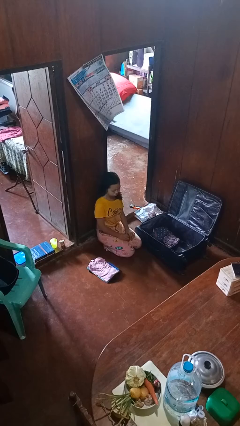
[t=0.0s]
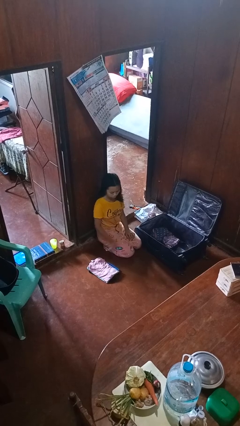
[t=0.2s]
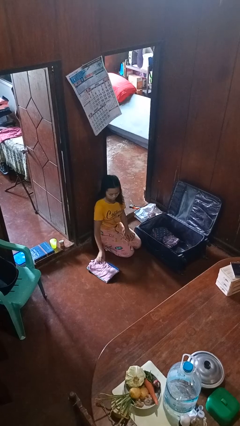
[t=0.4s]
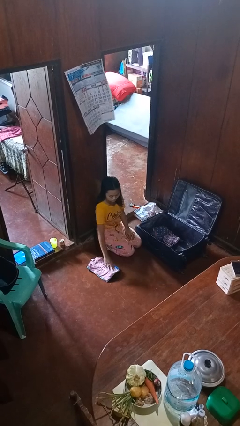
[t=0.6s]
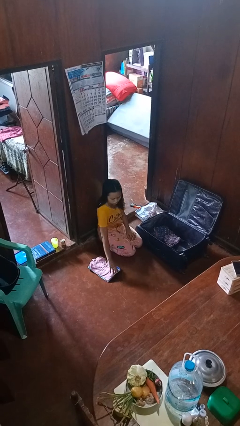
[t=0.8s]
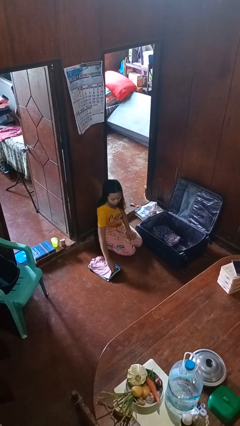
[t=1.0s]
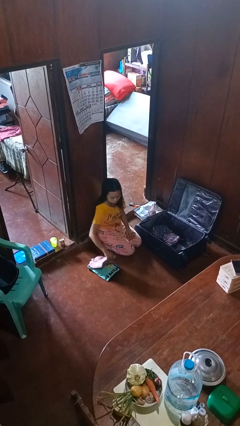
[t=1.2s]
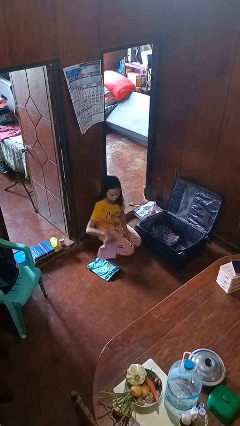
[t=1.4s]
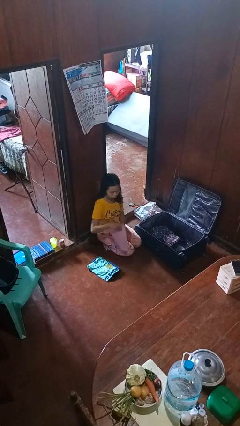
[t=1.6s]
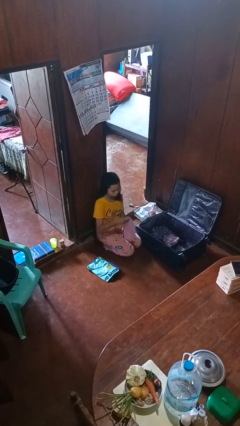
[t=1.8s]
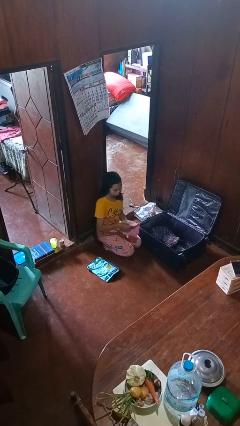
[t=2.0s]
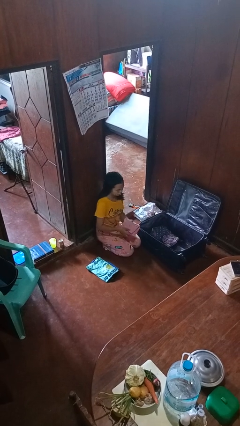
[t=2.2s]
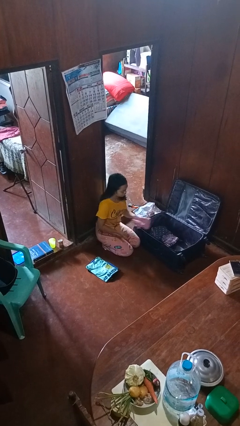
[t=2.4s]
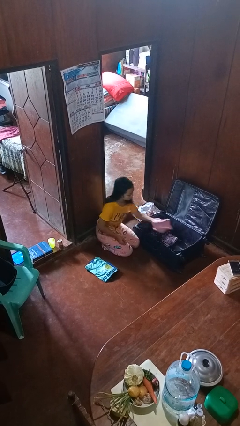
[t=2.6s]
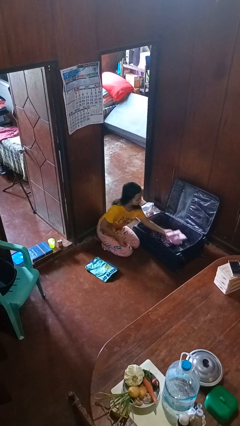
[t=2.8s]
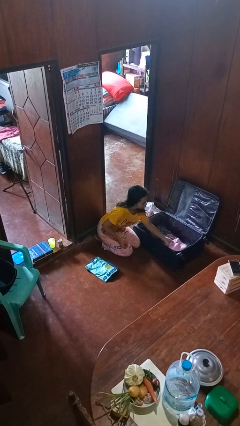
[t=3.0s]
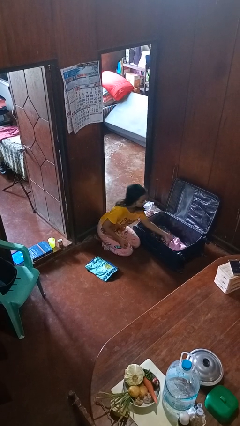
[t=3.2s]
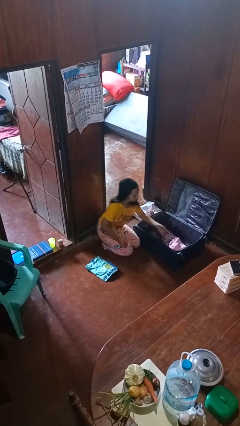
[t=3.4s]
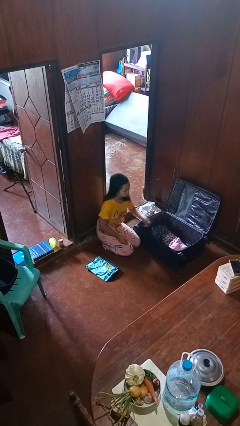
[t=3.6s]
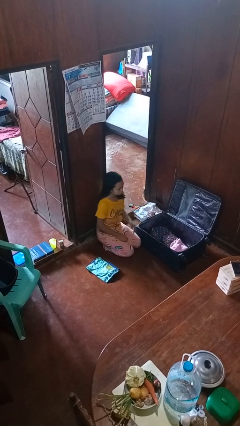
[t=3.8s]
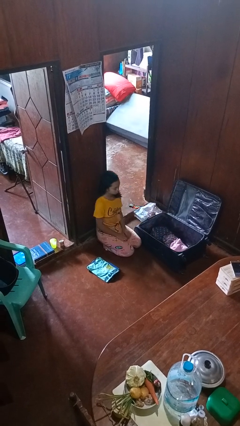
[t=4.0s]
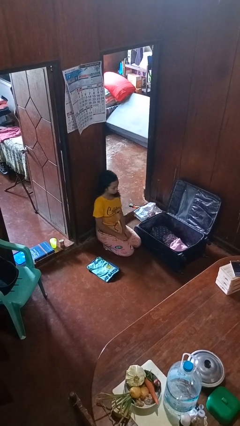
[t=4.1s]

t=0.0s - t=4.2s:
person loads clothes into suitcase

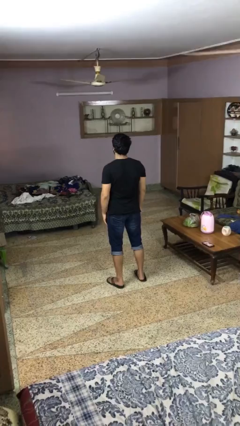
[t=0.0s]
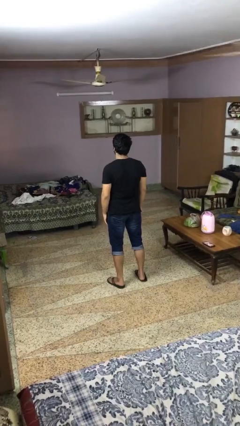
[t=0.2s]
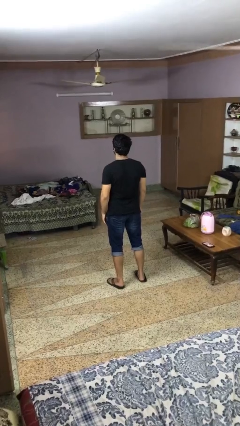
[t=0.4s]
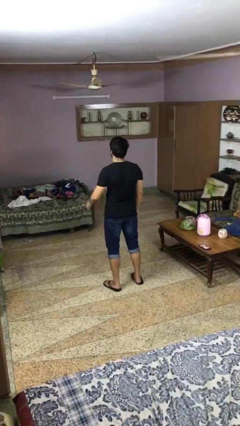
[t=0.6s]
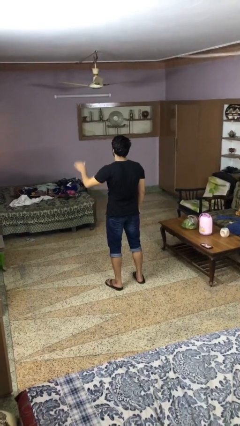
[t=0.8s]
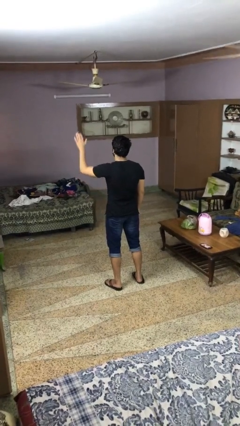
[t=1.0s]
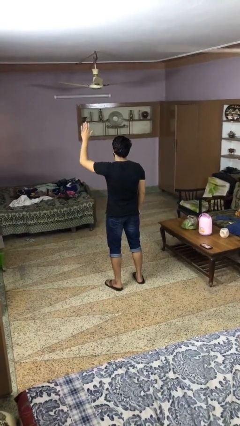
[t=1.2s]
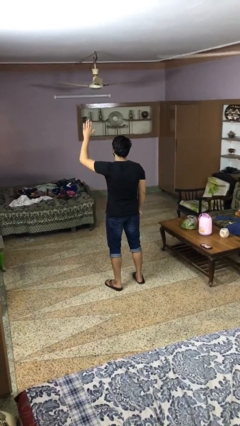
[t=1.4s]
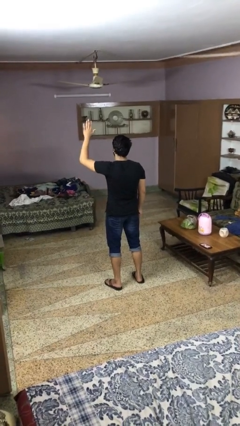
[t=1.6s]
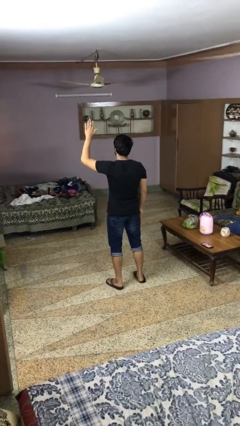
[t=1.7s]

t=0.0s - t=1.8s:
person gestures raise hand

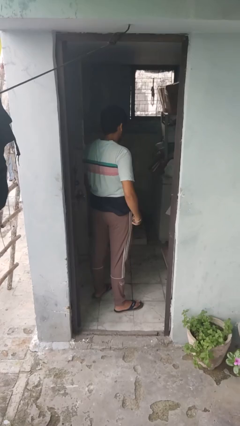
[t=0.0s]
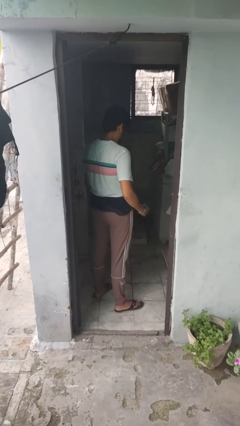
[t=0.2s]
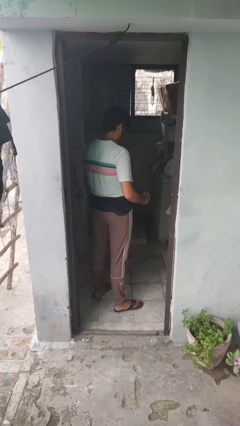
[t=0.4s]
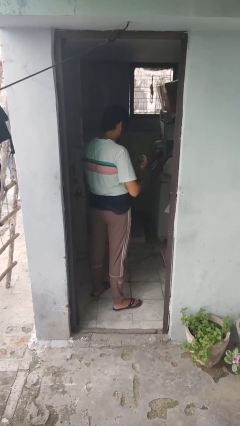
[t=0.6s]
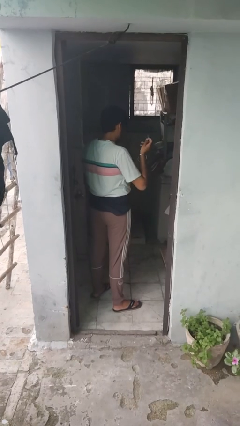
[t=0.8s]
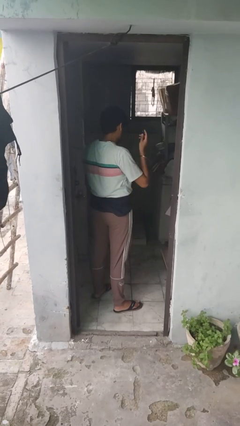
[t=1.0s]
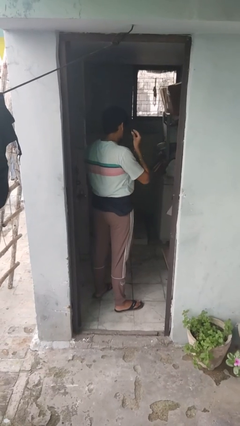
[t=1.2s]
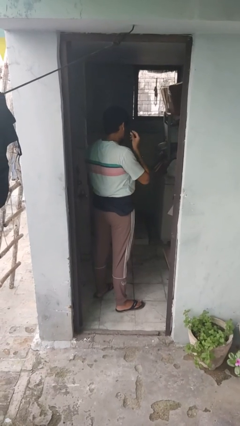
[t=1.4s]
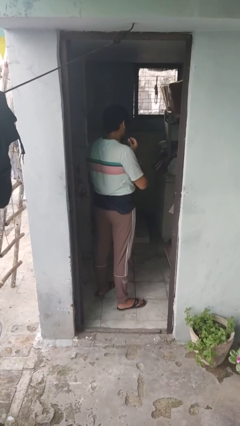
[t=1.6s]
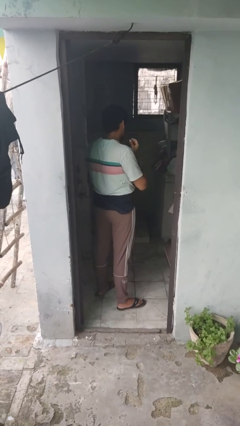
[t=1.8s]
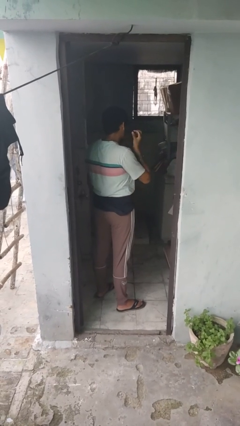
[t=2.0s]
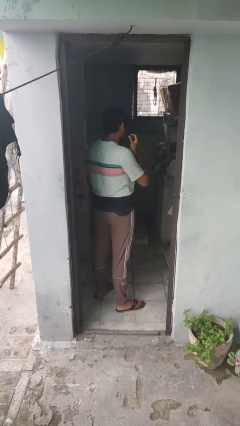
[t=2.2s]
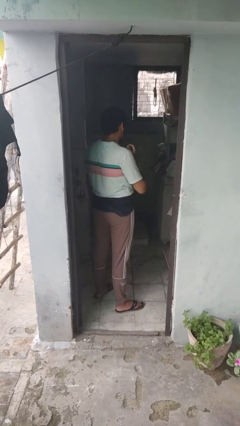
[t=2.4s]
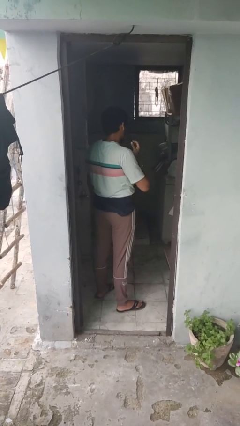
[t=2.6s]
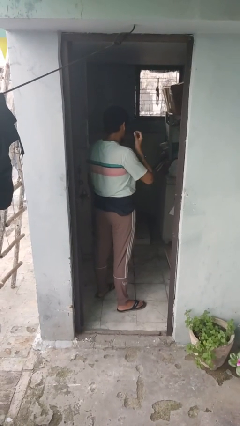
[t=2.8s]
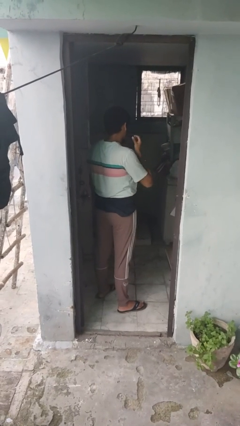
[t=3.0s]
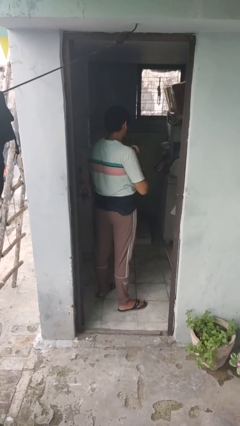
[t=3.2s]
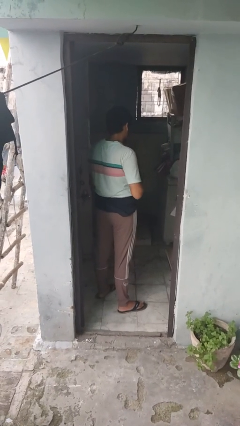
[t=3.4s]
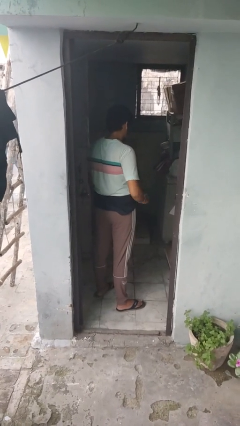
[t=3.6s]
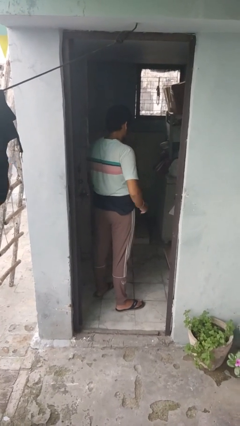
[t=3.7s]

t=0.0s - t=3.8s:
person shaves face

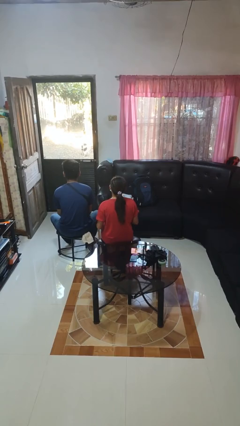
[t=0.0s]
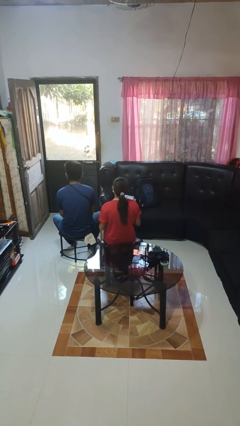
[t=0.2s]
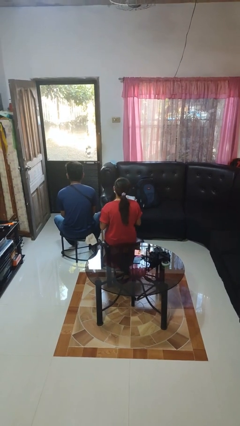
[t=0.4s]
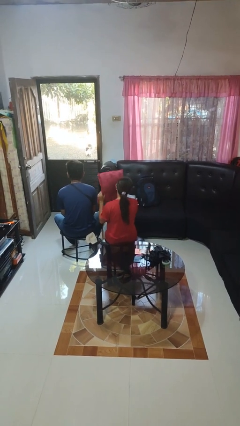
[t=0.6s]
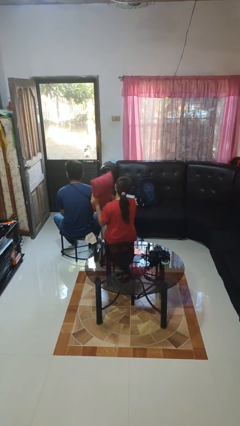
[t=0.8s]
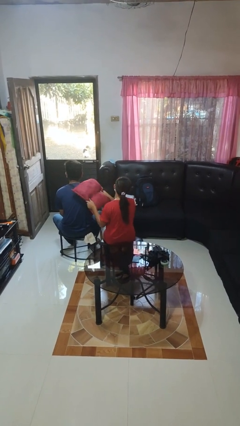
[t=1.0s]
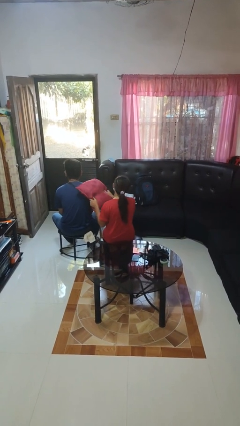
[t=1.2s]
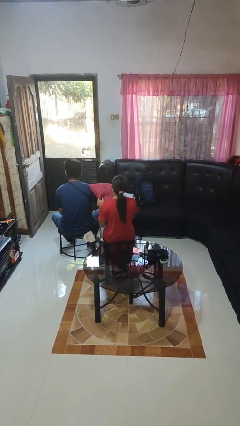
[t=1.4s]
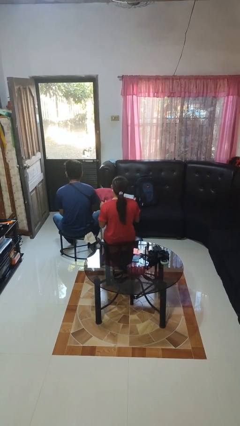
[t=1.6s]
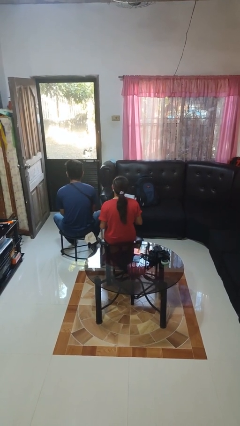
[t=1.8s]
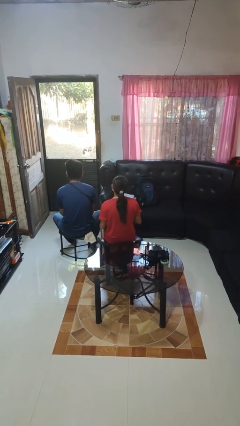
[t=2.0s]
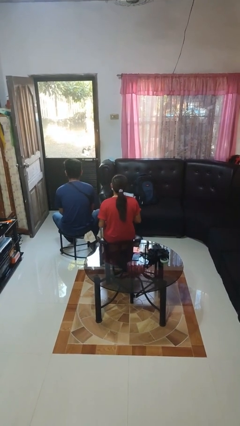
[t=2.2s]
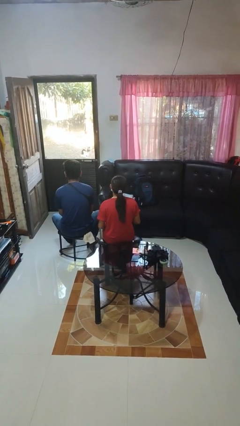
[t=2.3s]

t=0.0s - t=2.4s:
person hits person with pillow

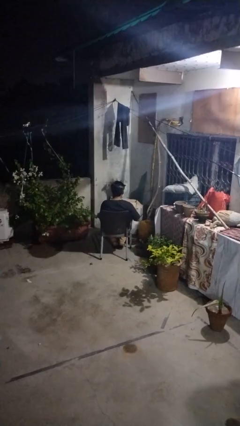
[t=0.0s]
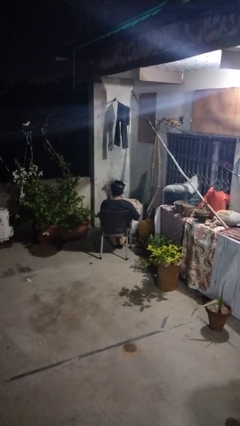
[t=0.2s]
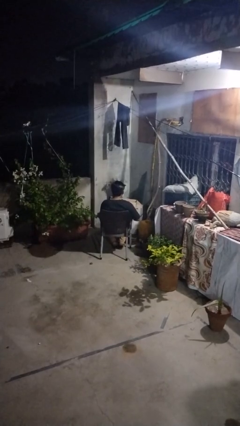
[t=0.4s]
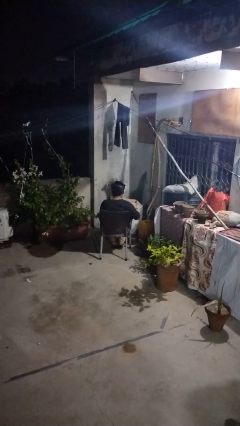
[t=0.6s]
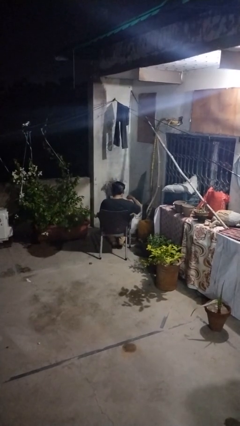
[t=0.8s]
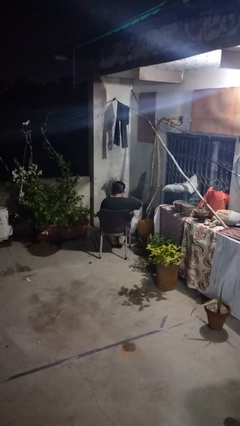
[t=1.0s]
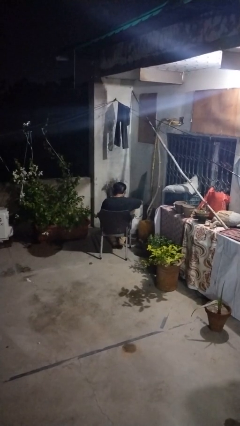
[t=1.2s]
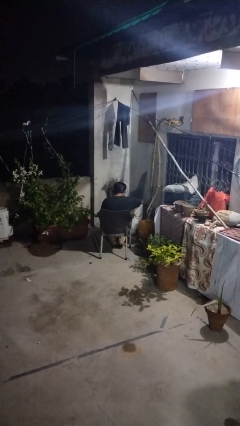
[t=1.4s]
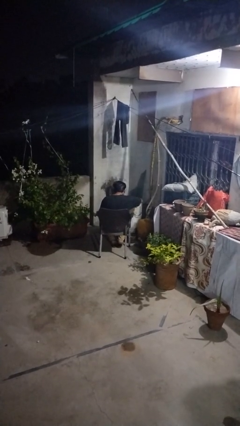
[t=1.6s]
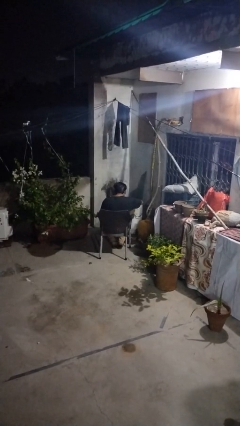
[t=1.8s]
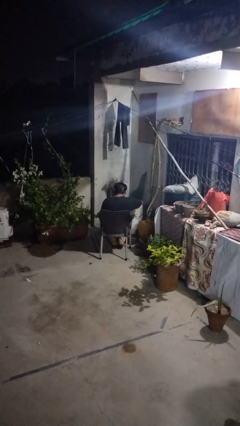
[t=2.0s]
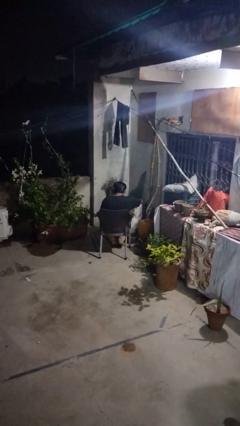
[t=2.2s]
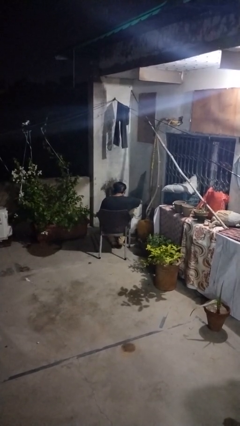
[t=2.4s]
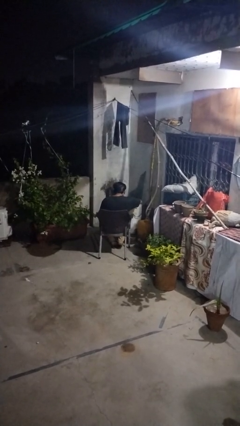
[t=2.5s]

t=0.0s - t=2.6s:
person searches in box

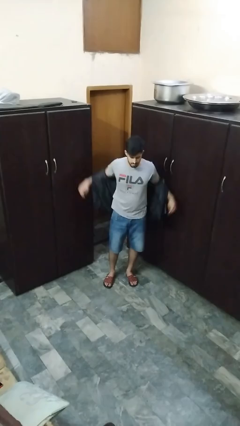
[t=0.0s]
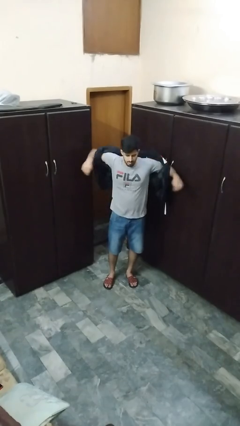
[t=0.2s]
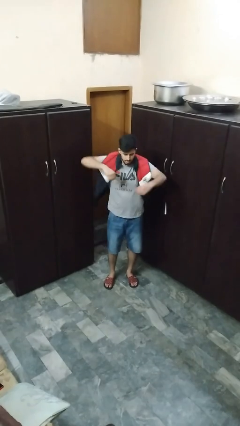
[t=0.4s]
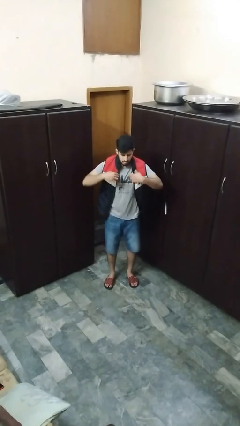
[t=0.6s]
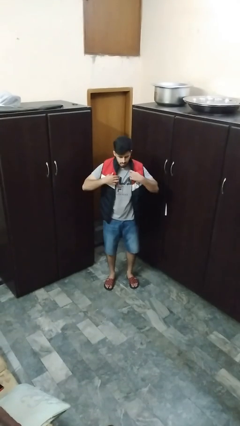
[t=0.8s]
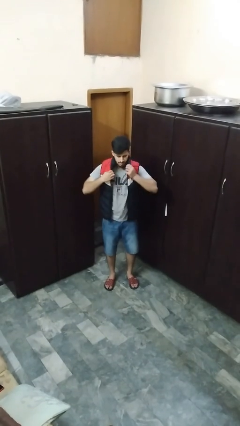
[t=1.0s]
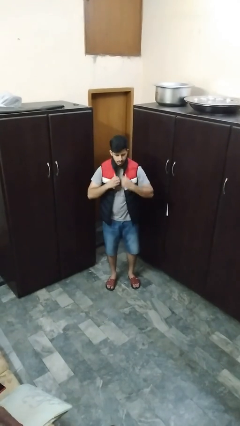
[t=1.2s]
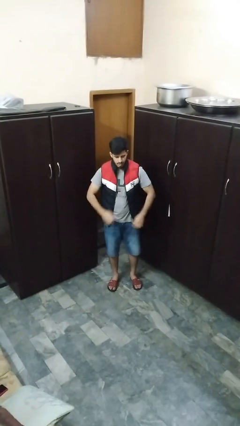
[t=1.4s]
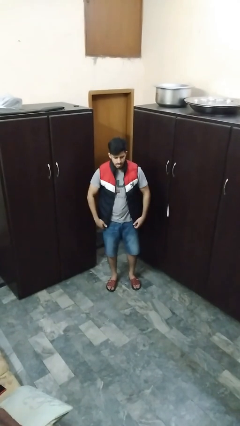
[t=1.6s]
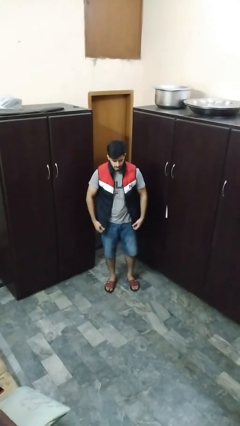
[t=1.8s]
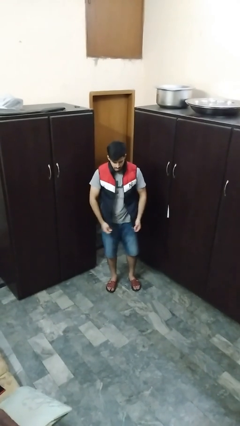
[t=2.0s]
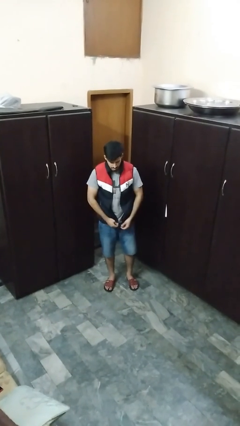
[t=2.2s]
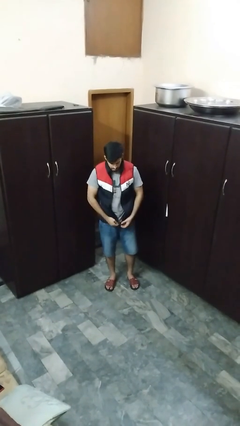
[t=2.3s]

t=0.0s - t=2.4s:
person puts on jacket

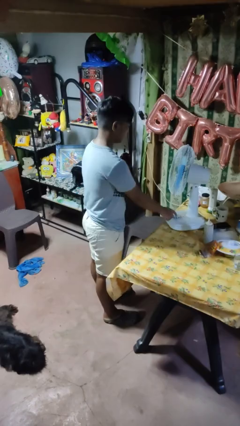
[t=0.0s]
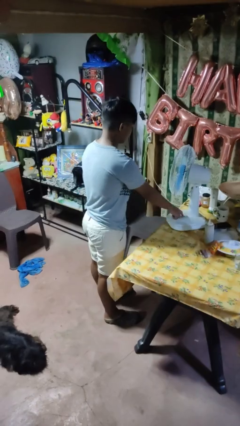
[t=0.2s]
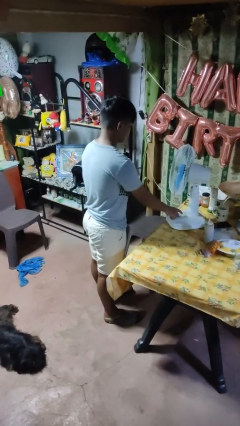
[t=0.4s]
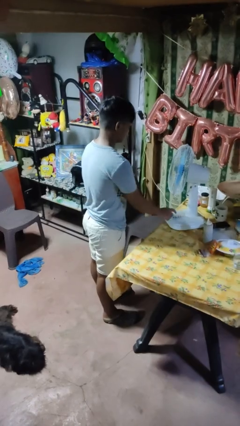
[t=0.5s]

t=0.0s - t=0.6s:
person turns off fan
